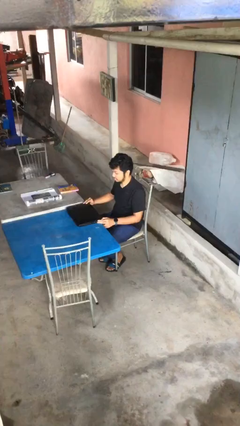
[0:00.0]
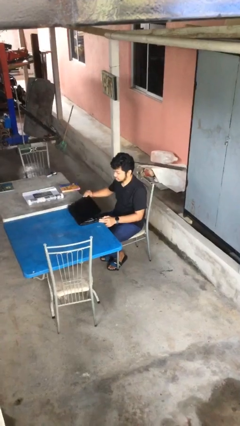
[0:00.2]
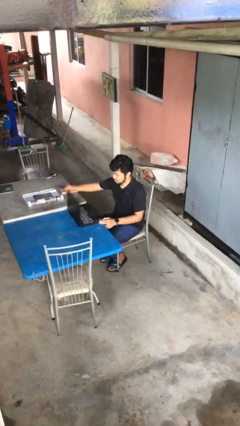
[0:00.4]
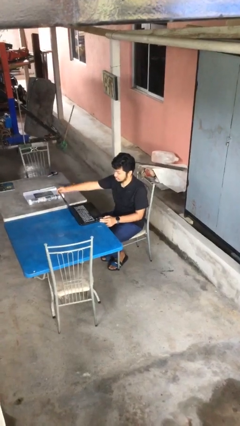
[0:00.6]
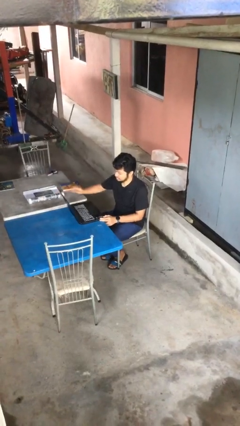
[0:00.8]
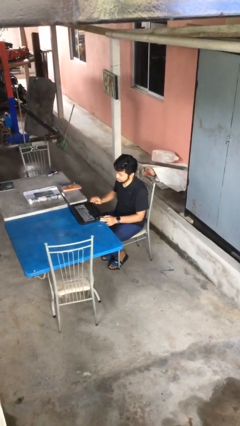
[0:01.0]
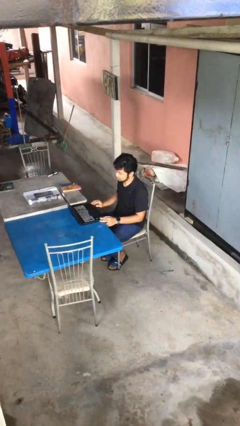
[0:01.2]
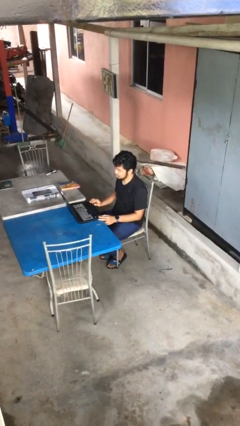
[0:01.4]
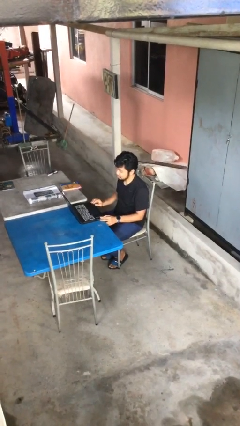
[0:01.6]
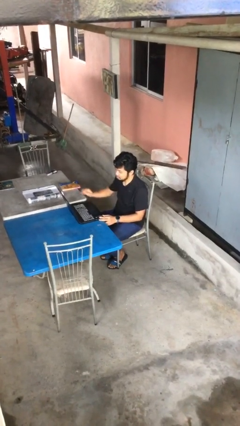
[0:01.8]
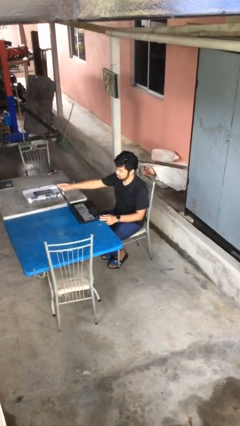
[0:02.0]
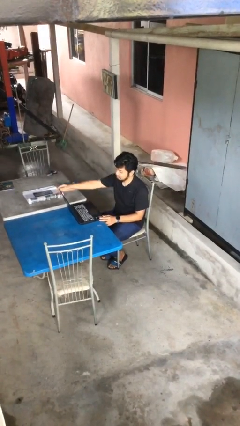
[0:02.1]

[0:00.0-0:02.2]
person opens laptop

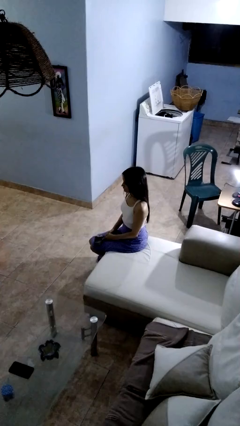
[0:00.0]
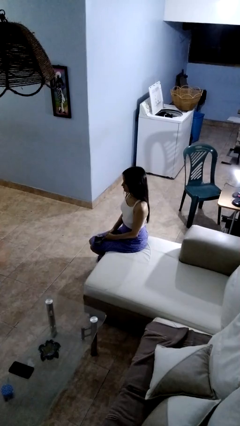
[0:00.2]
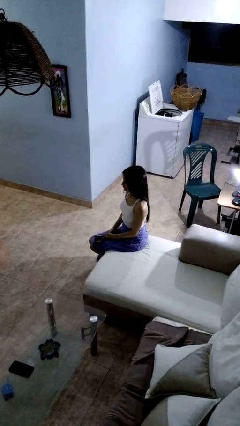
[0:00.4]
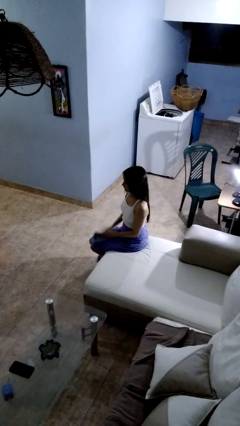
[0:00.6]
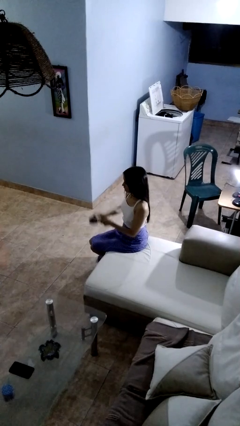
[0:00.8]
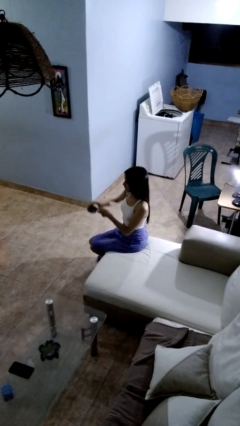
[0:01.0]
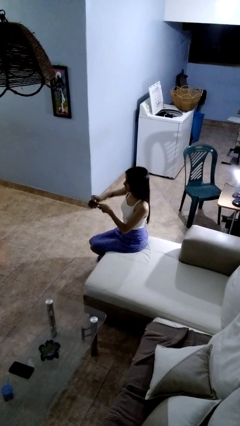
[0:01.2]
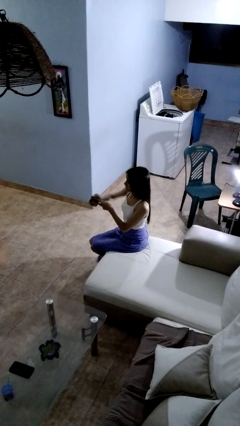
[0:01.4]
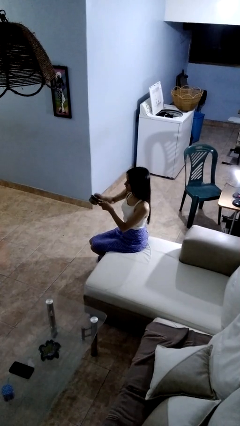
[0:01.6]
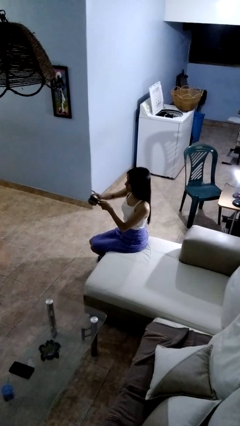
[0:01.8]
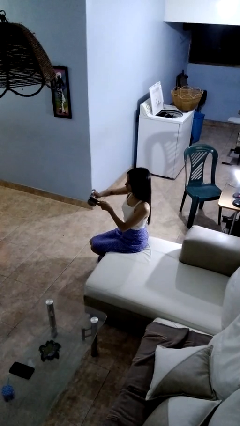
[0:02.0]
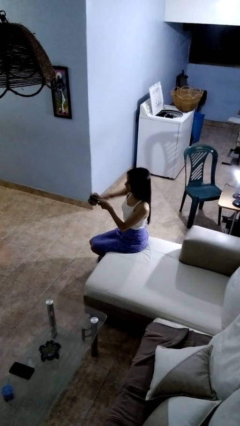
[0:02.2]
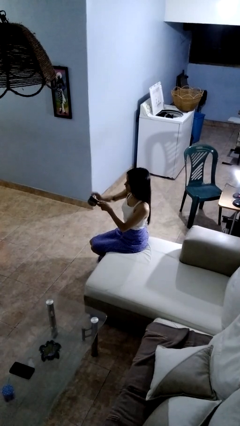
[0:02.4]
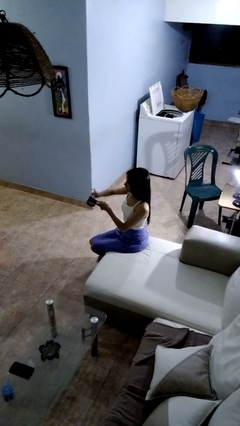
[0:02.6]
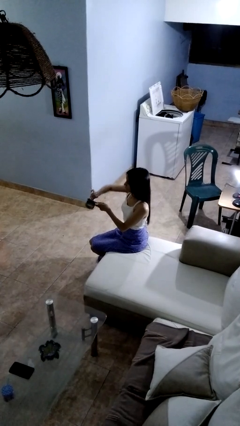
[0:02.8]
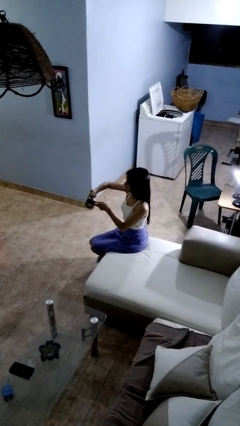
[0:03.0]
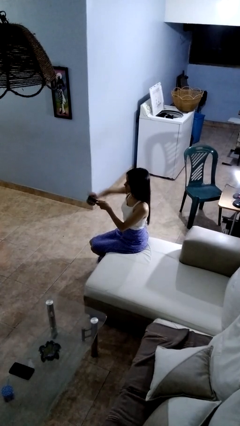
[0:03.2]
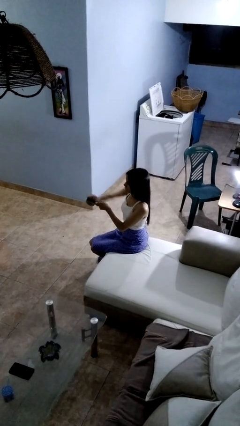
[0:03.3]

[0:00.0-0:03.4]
person opens can with can opener

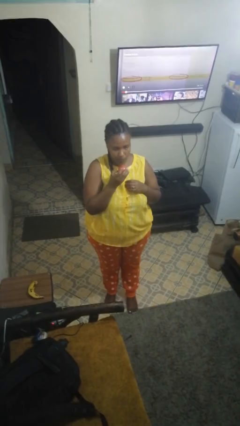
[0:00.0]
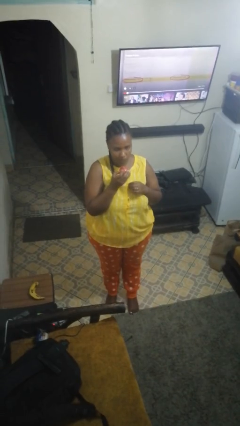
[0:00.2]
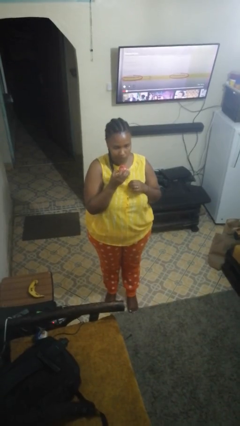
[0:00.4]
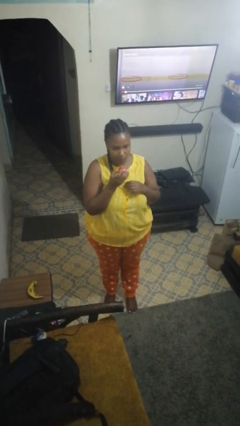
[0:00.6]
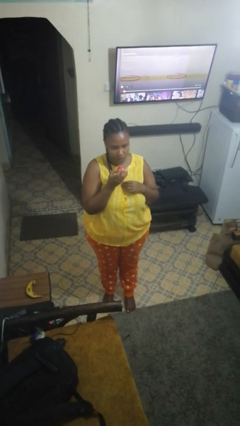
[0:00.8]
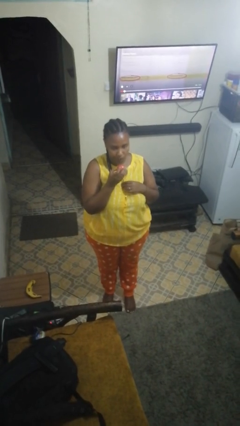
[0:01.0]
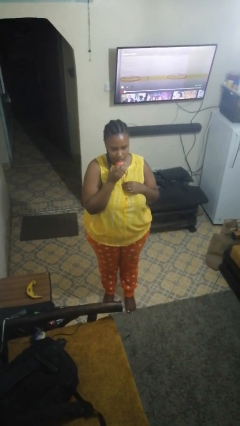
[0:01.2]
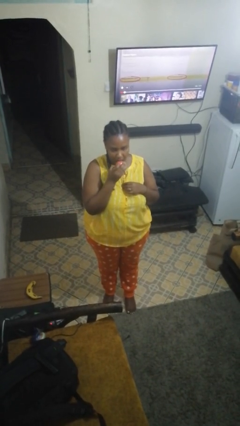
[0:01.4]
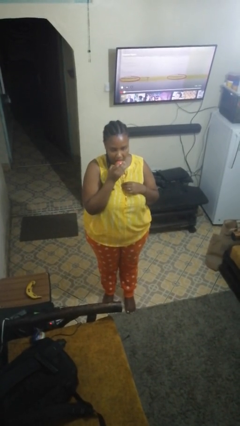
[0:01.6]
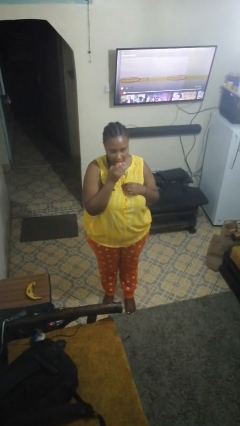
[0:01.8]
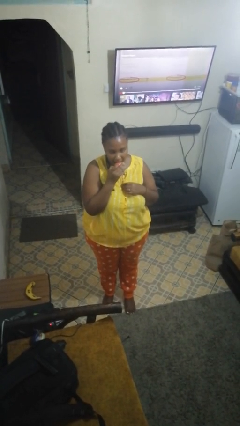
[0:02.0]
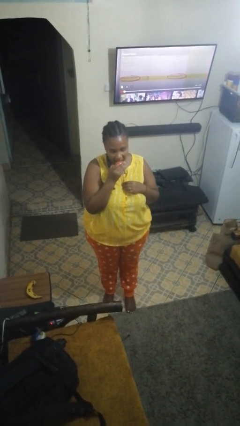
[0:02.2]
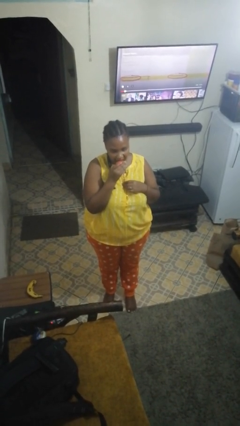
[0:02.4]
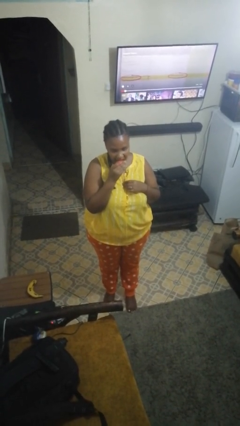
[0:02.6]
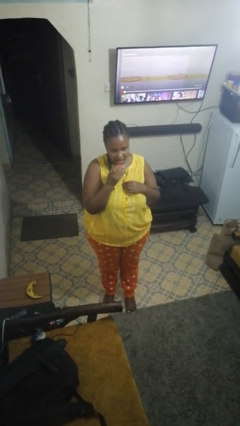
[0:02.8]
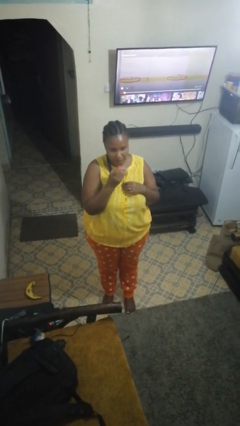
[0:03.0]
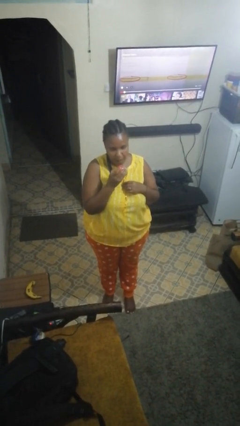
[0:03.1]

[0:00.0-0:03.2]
person eats apple

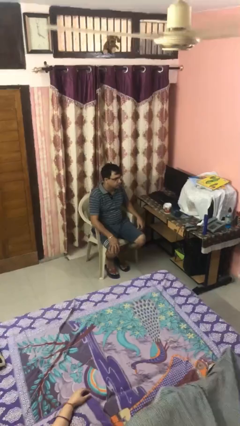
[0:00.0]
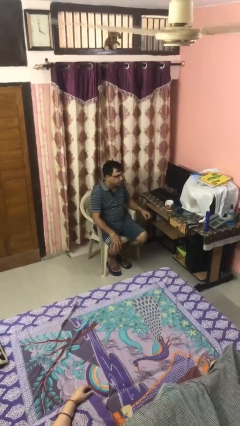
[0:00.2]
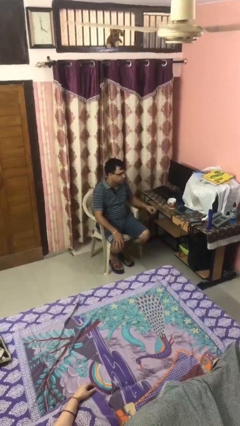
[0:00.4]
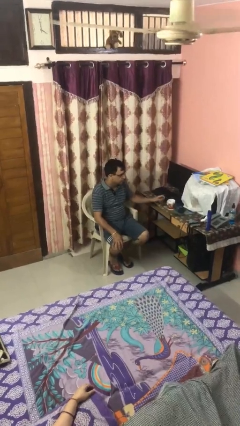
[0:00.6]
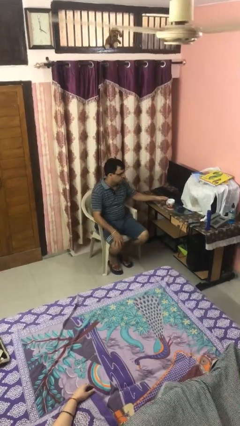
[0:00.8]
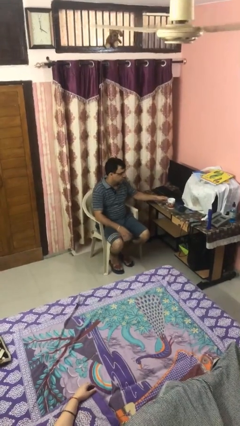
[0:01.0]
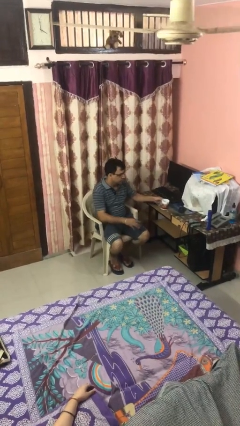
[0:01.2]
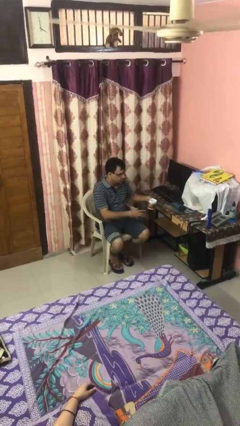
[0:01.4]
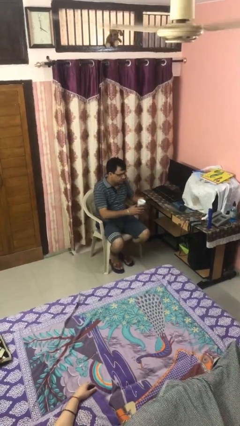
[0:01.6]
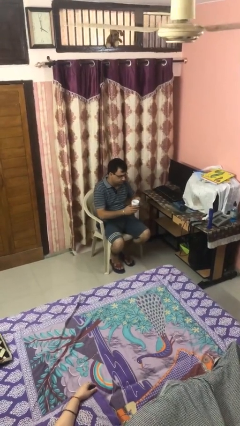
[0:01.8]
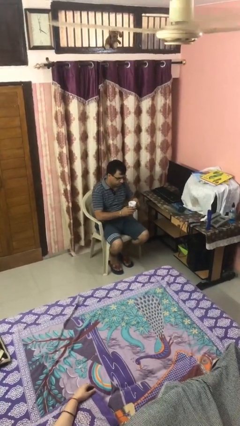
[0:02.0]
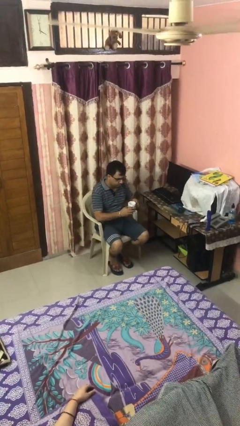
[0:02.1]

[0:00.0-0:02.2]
person picks up object from table

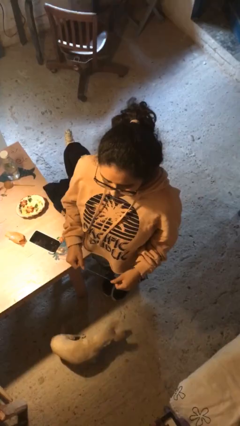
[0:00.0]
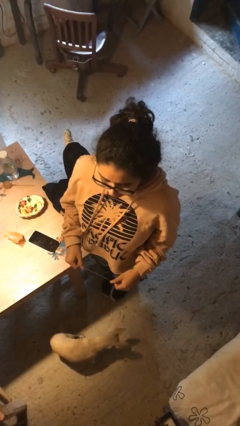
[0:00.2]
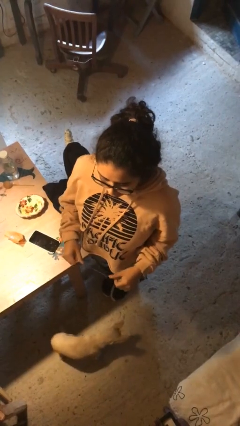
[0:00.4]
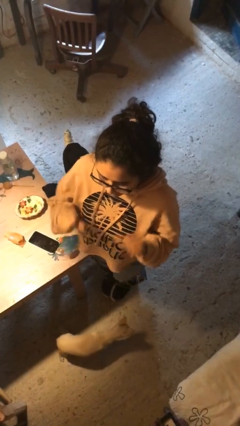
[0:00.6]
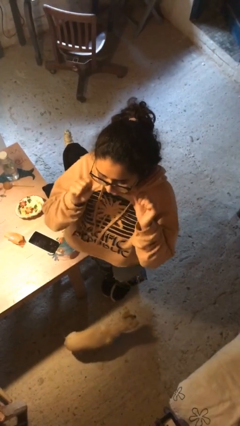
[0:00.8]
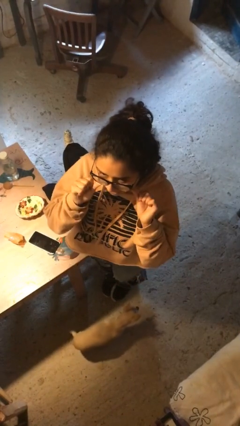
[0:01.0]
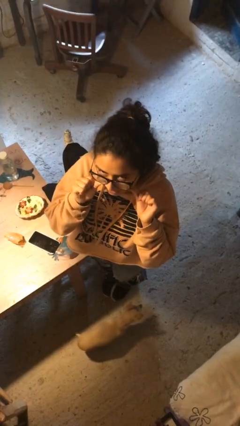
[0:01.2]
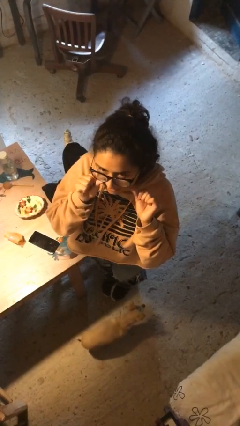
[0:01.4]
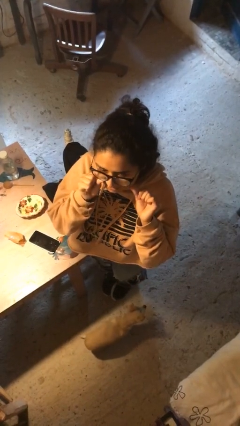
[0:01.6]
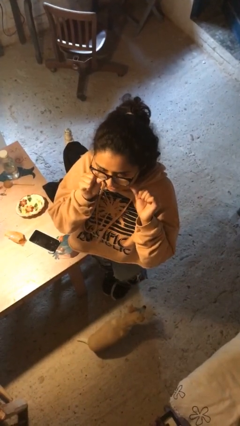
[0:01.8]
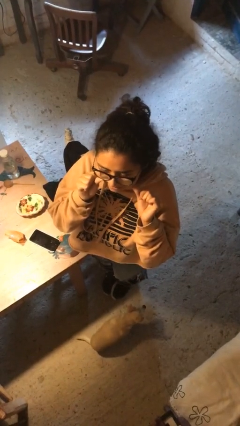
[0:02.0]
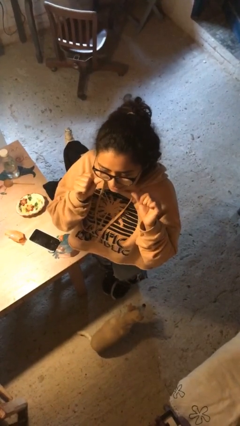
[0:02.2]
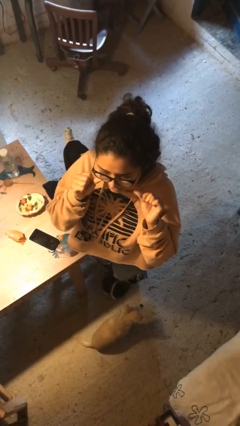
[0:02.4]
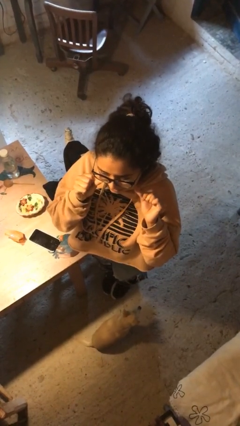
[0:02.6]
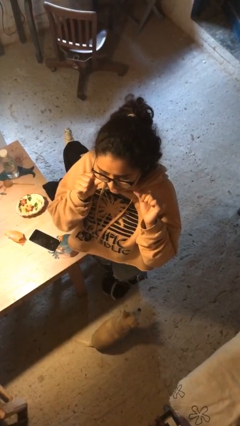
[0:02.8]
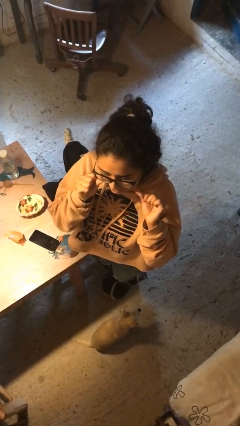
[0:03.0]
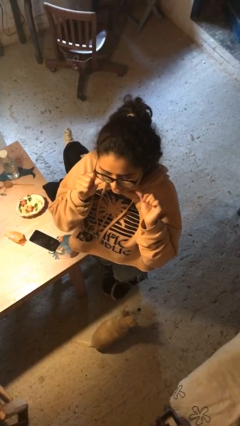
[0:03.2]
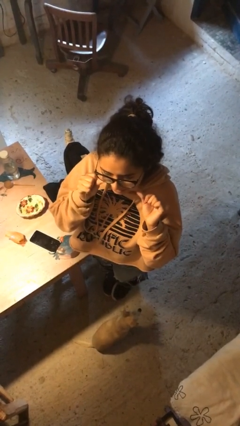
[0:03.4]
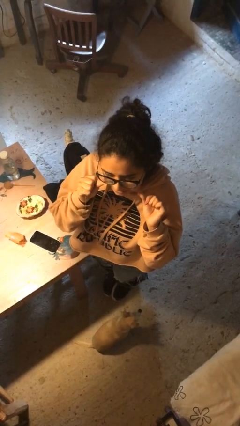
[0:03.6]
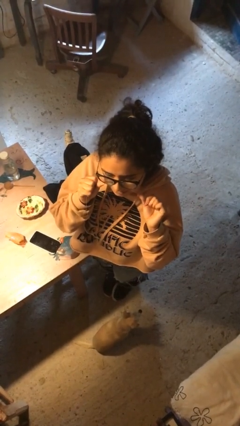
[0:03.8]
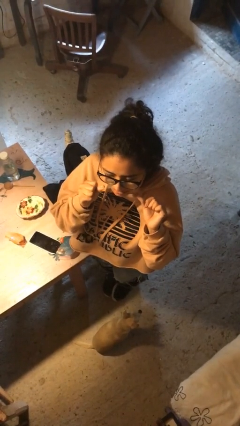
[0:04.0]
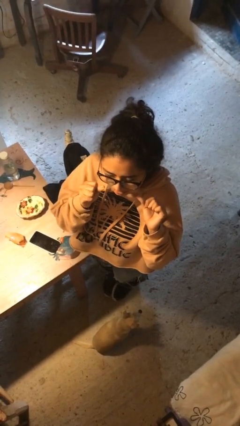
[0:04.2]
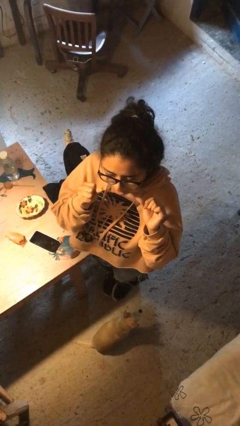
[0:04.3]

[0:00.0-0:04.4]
person flosses

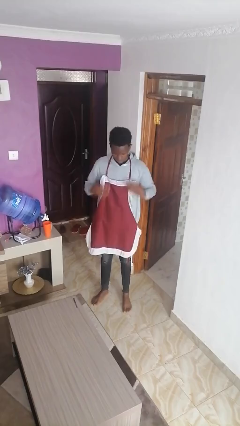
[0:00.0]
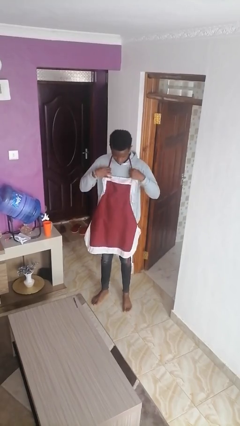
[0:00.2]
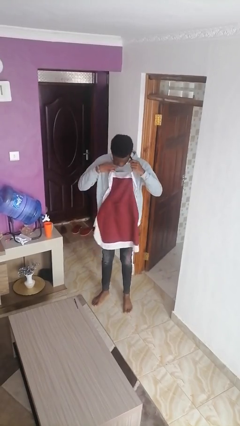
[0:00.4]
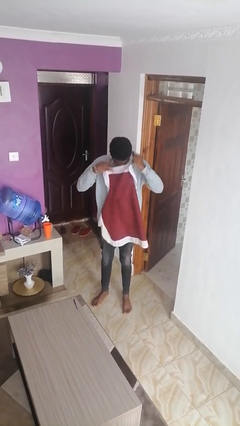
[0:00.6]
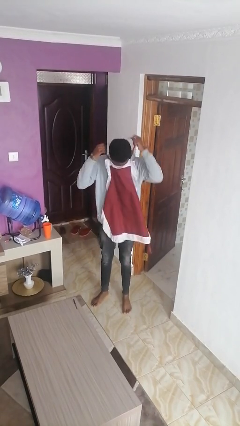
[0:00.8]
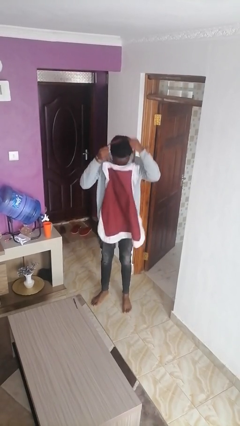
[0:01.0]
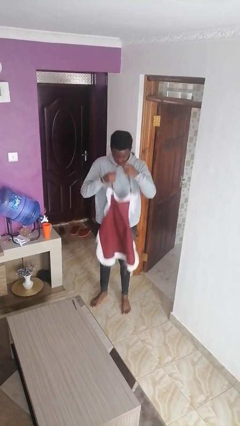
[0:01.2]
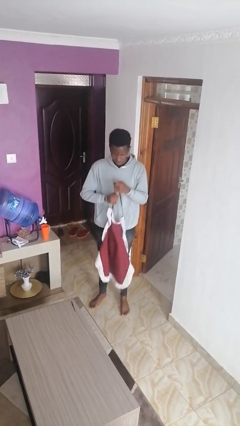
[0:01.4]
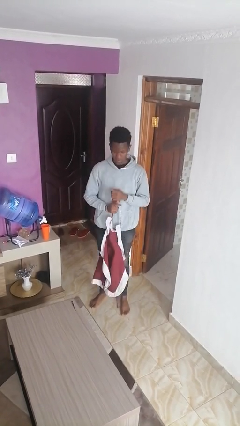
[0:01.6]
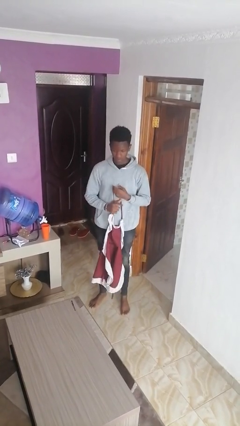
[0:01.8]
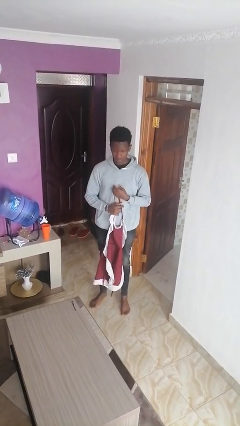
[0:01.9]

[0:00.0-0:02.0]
person takes off apron
